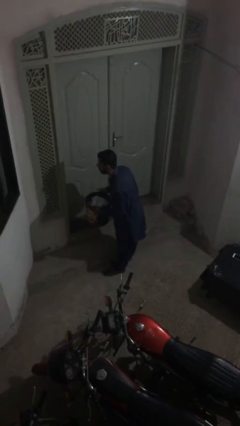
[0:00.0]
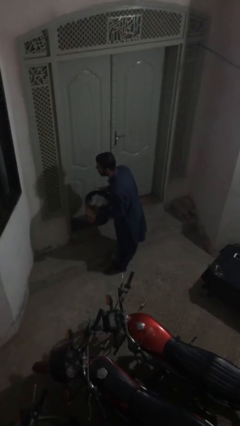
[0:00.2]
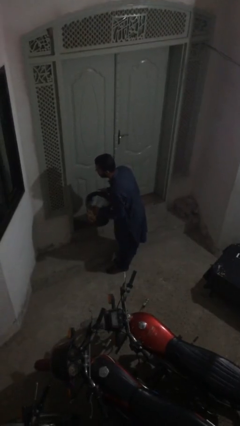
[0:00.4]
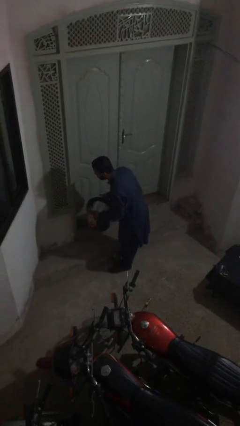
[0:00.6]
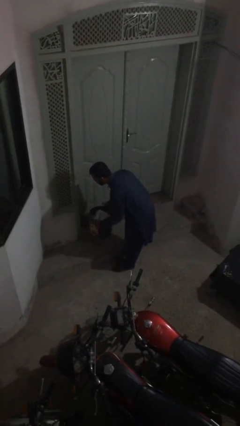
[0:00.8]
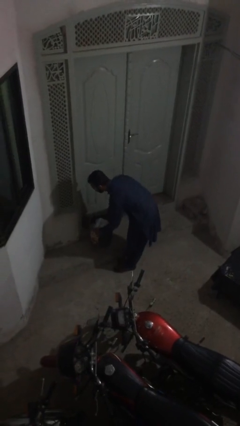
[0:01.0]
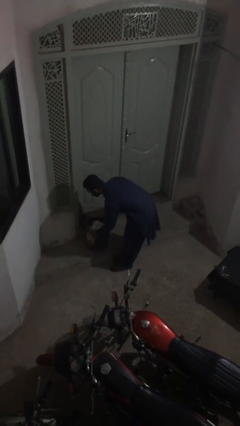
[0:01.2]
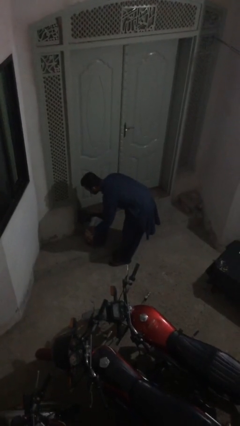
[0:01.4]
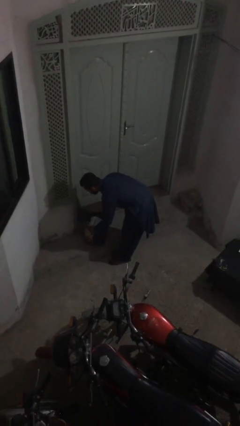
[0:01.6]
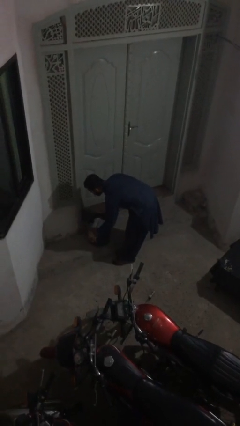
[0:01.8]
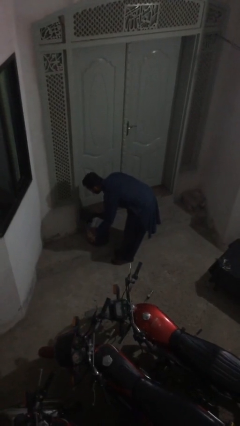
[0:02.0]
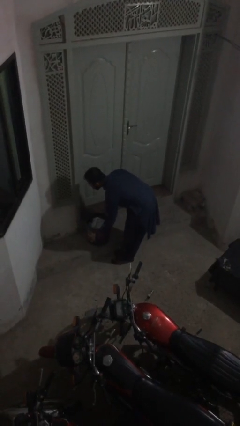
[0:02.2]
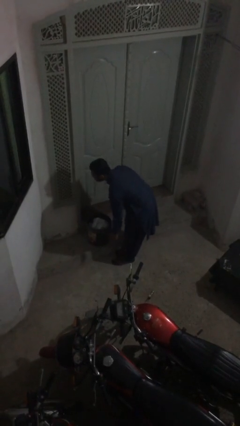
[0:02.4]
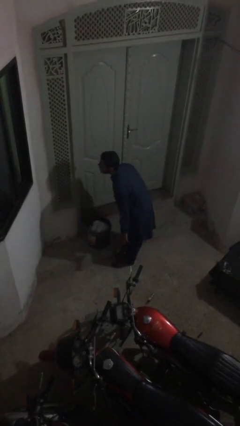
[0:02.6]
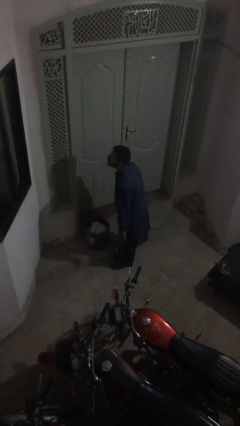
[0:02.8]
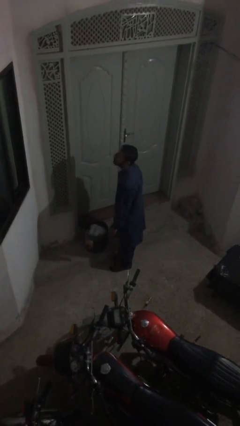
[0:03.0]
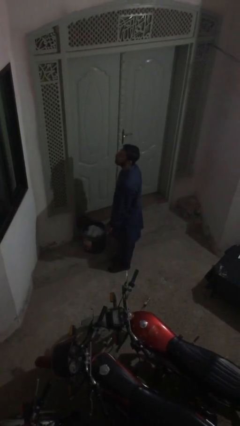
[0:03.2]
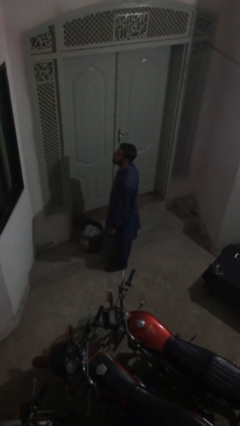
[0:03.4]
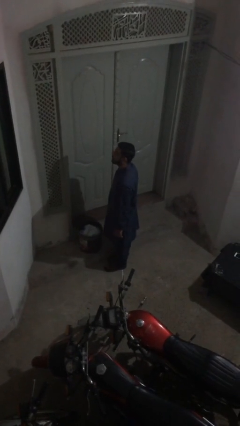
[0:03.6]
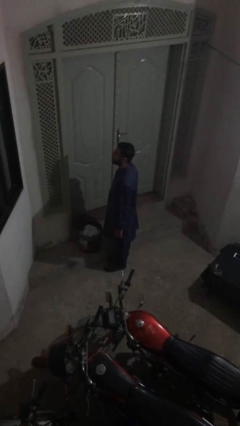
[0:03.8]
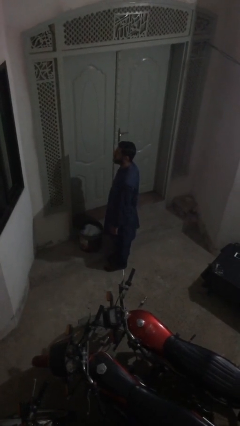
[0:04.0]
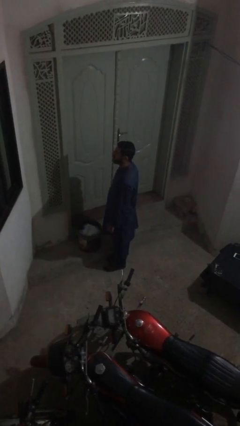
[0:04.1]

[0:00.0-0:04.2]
person puts down object on table

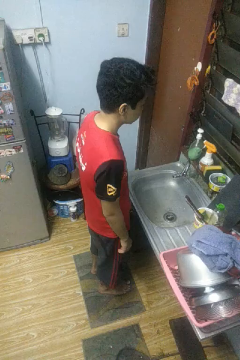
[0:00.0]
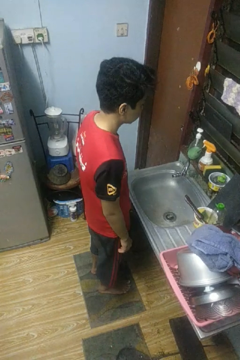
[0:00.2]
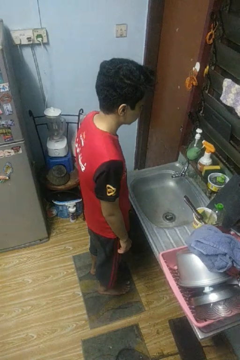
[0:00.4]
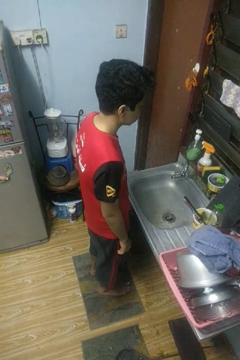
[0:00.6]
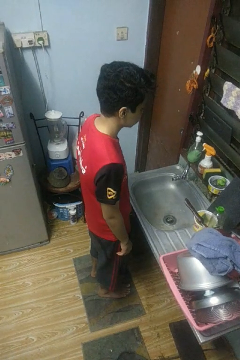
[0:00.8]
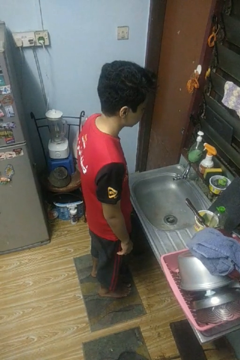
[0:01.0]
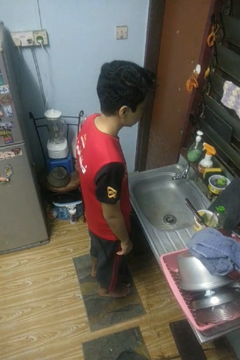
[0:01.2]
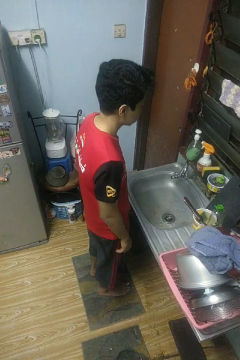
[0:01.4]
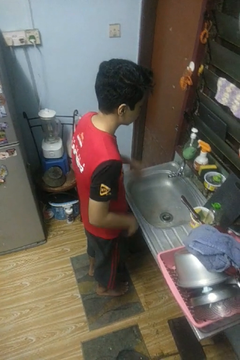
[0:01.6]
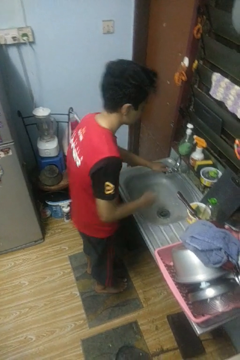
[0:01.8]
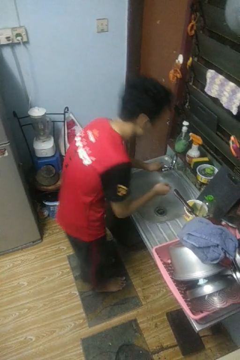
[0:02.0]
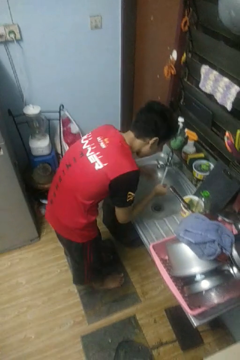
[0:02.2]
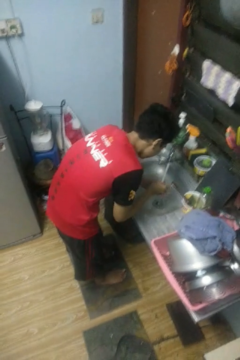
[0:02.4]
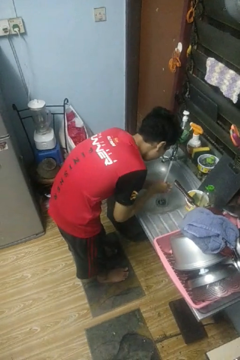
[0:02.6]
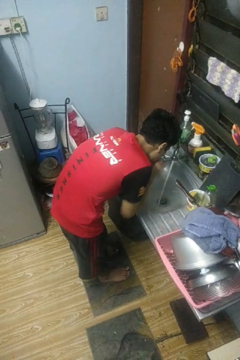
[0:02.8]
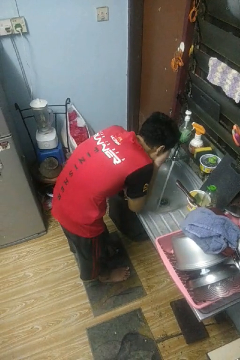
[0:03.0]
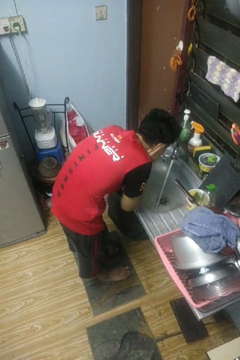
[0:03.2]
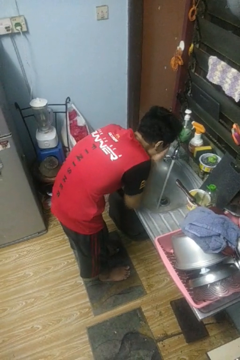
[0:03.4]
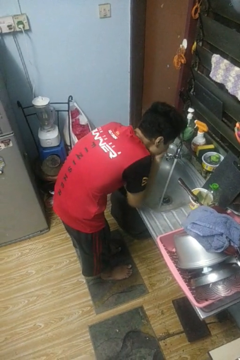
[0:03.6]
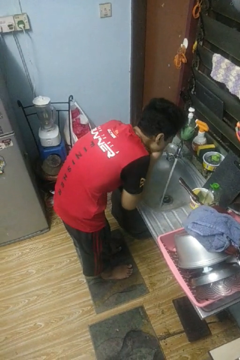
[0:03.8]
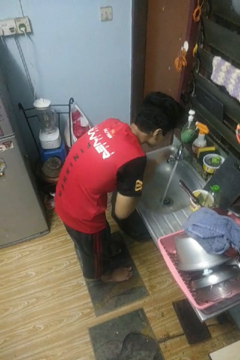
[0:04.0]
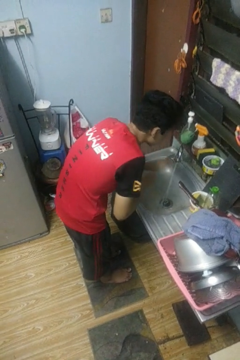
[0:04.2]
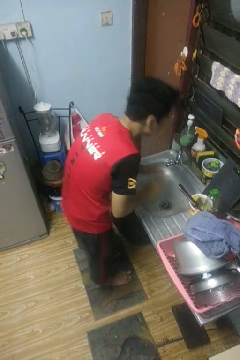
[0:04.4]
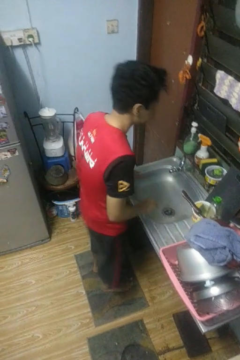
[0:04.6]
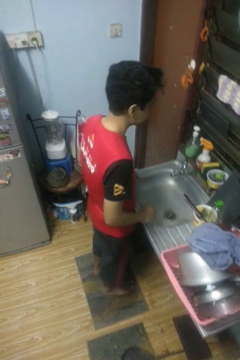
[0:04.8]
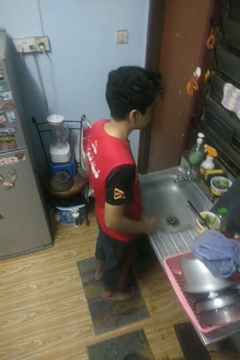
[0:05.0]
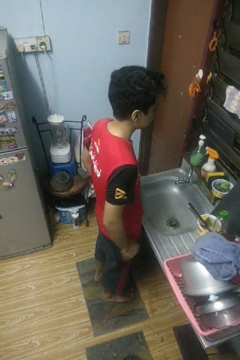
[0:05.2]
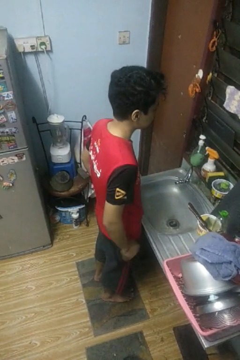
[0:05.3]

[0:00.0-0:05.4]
person washes face

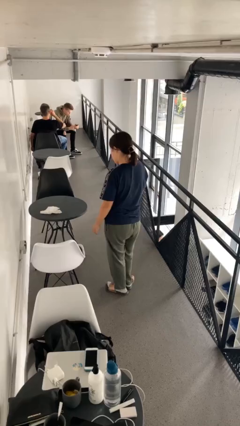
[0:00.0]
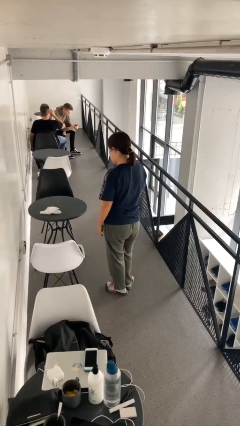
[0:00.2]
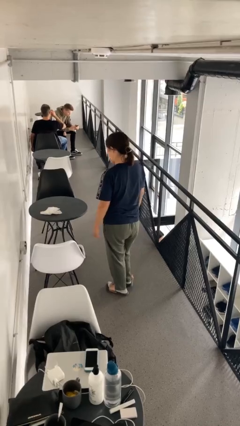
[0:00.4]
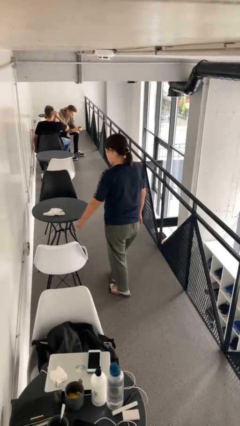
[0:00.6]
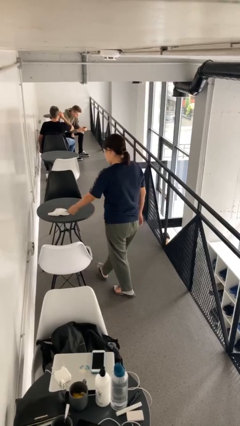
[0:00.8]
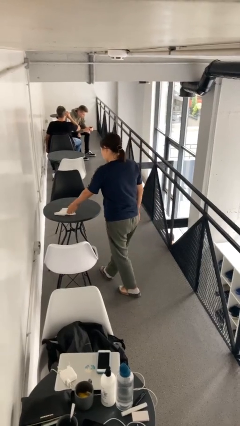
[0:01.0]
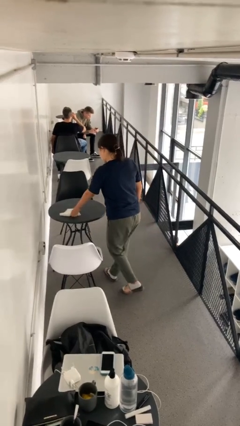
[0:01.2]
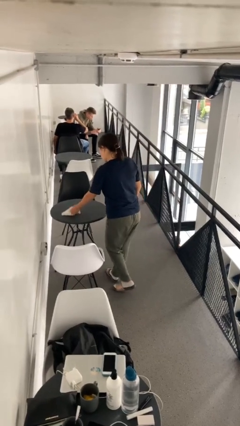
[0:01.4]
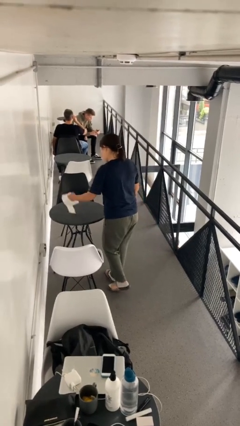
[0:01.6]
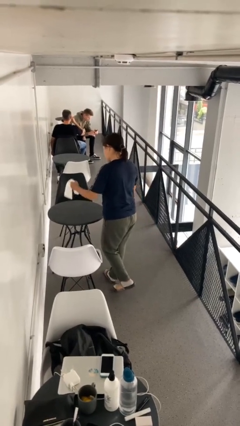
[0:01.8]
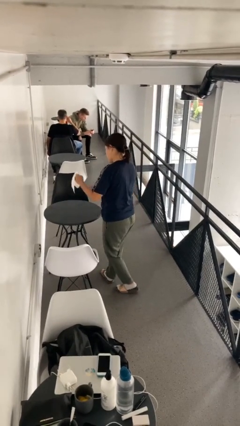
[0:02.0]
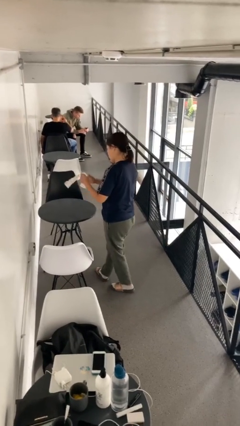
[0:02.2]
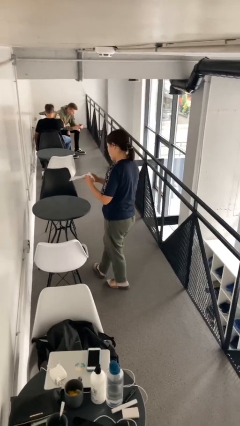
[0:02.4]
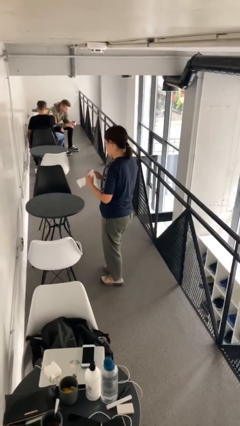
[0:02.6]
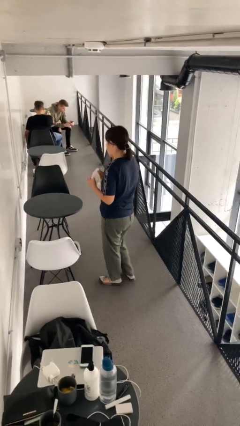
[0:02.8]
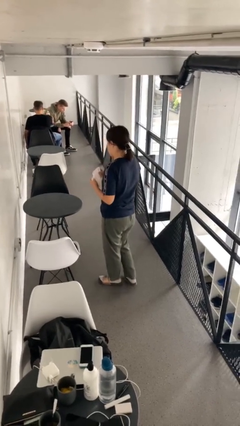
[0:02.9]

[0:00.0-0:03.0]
person picks up object from table

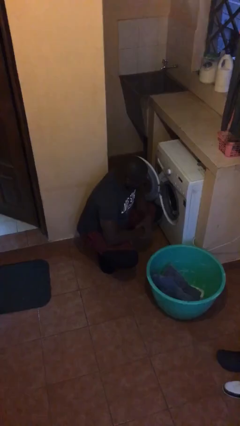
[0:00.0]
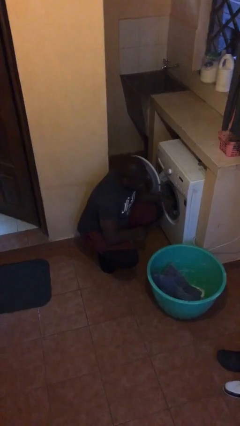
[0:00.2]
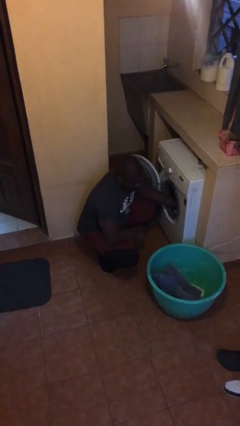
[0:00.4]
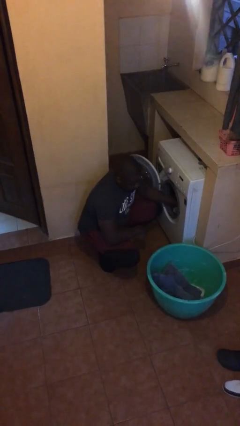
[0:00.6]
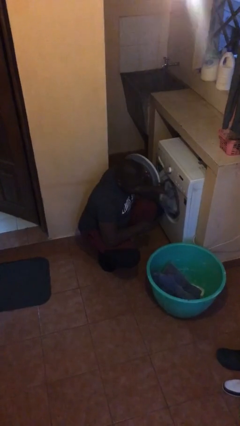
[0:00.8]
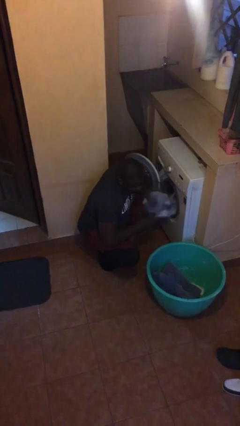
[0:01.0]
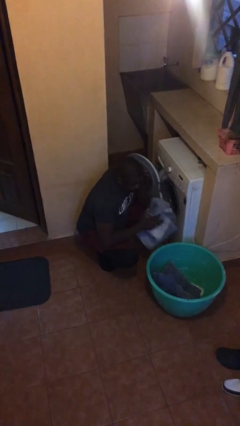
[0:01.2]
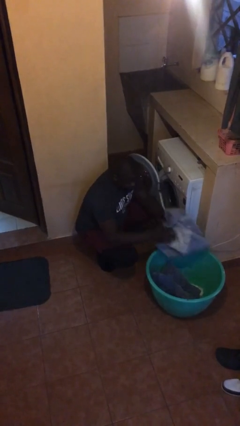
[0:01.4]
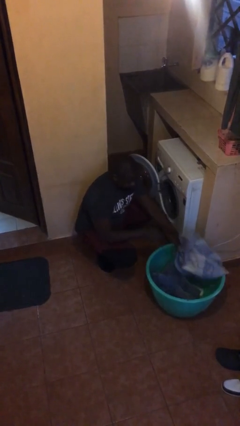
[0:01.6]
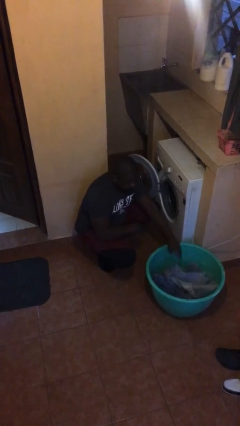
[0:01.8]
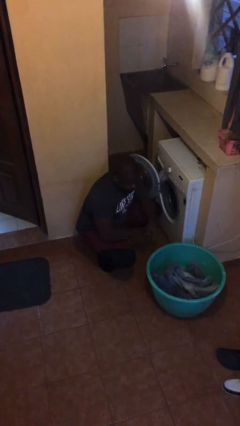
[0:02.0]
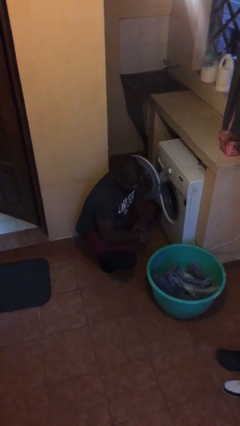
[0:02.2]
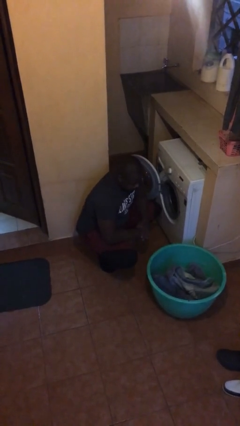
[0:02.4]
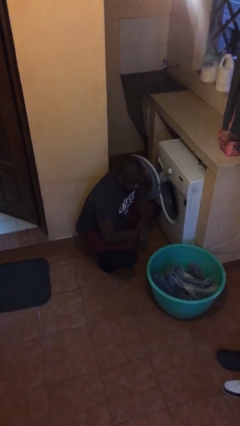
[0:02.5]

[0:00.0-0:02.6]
person unloads dryer

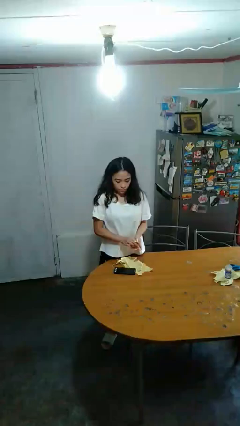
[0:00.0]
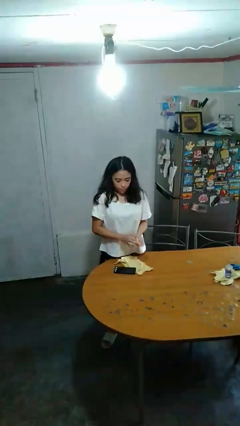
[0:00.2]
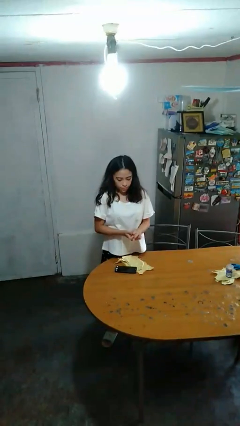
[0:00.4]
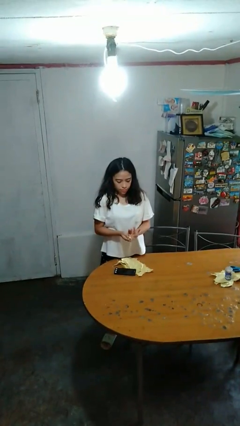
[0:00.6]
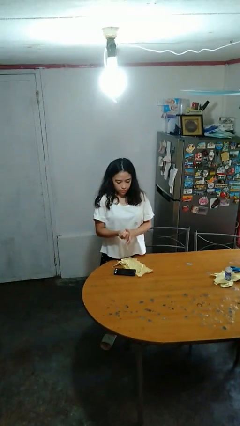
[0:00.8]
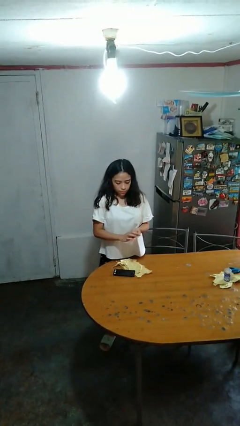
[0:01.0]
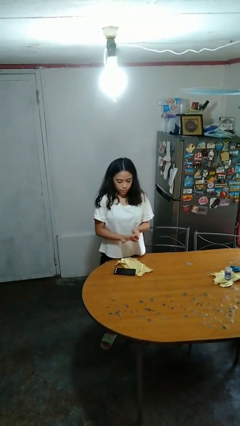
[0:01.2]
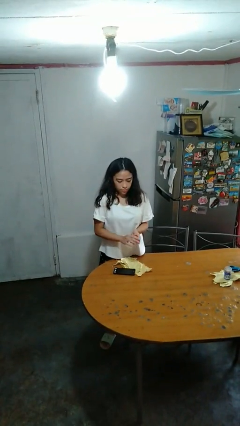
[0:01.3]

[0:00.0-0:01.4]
person crumples paper

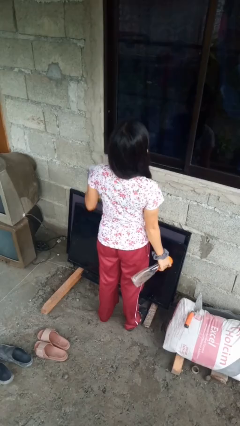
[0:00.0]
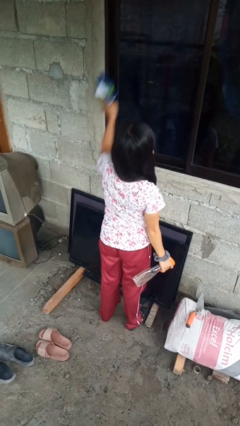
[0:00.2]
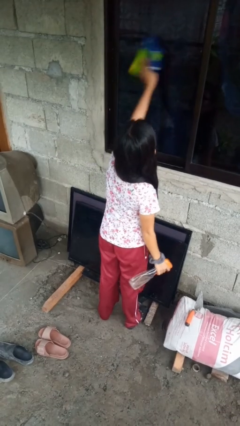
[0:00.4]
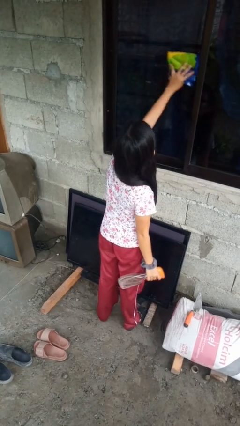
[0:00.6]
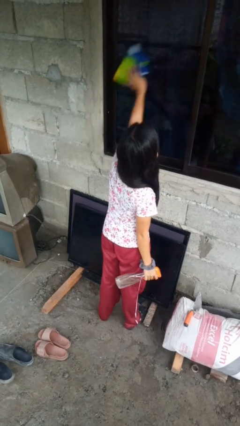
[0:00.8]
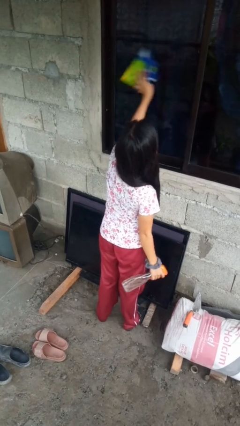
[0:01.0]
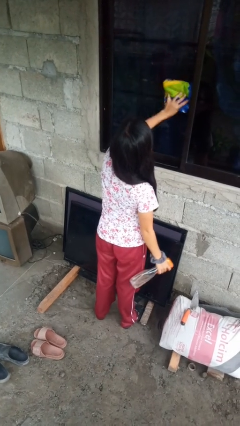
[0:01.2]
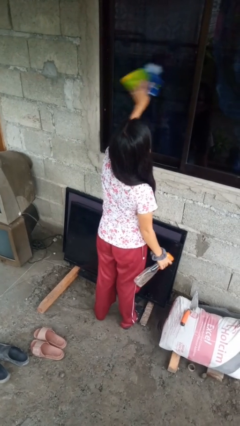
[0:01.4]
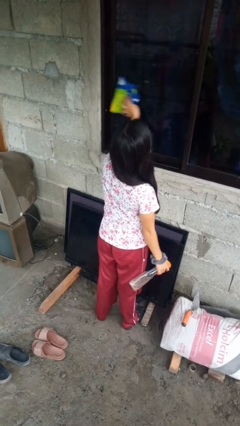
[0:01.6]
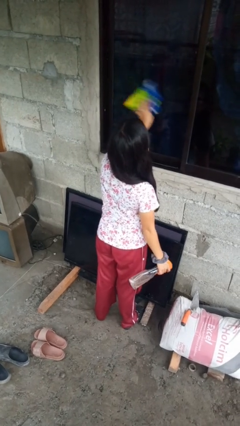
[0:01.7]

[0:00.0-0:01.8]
person washes window

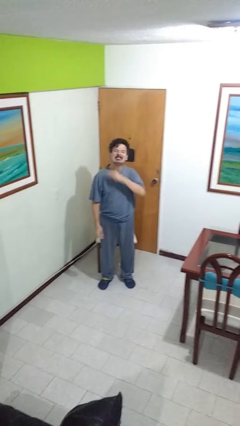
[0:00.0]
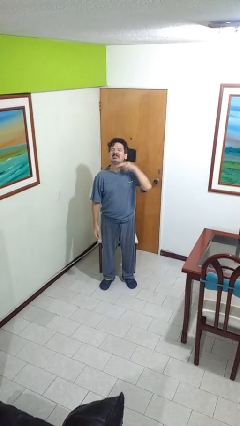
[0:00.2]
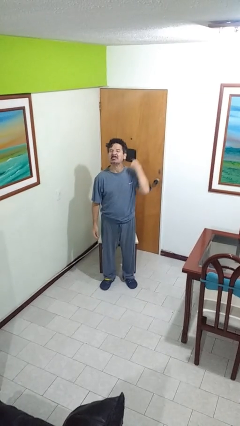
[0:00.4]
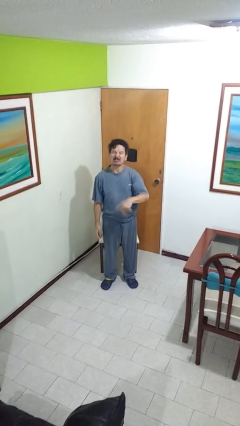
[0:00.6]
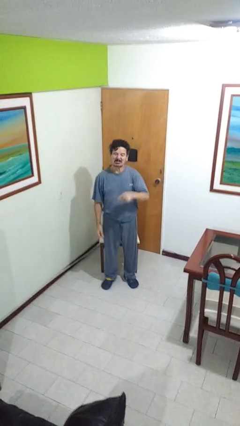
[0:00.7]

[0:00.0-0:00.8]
person gestures cut
